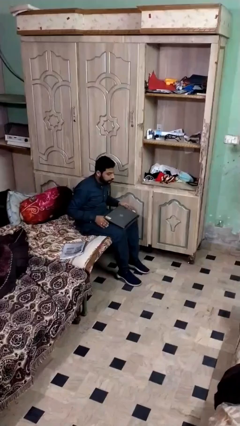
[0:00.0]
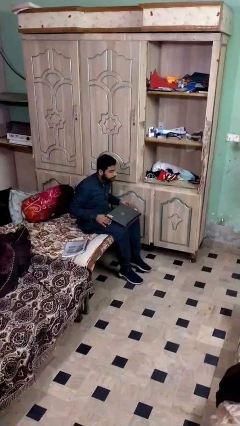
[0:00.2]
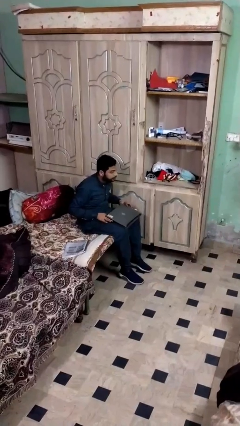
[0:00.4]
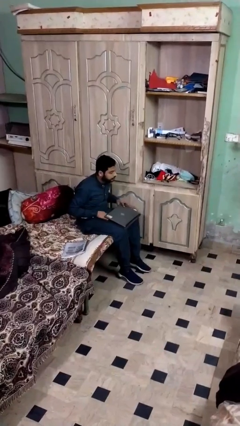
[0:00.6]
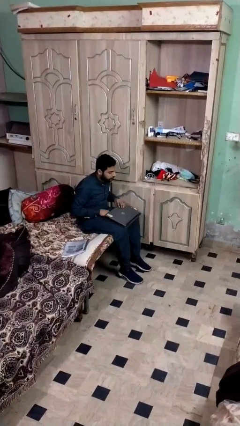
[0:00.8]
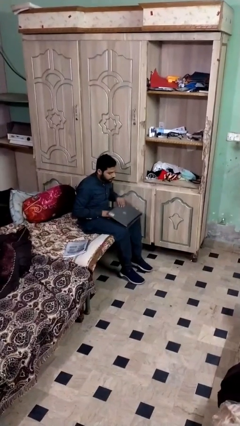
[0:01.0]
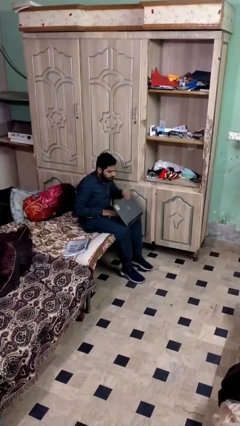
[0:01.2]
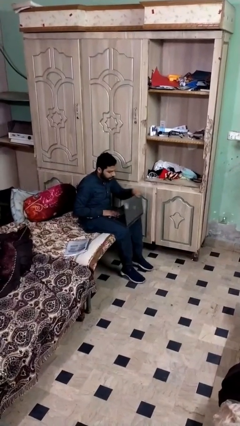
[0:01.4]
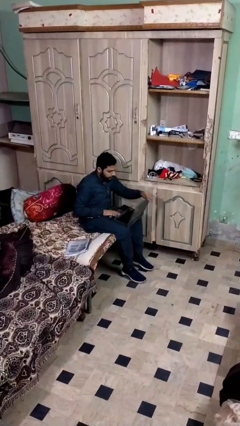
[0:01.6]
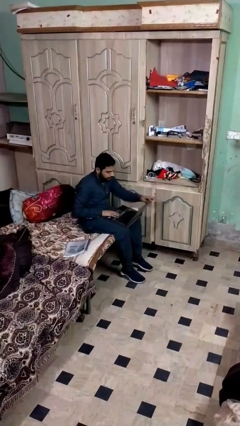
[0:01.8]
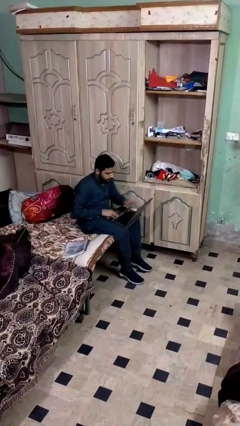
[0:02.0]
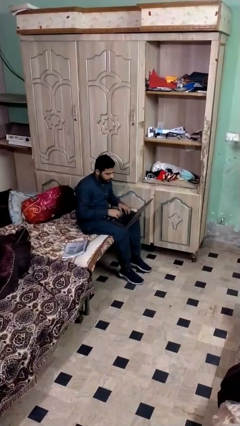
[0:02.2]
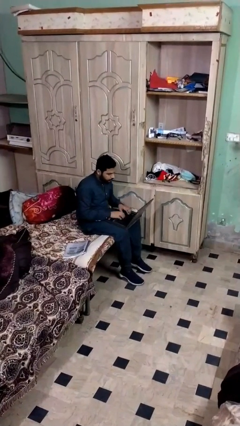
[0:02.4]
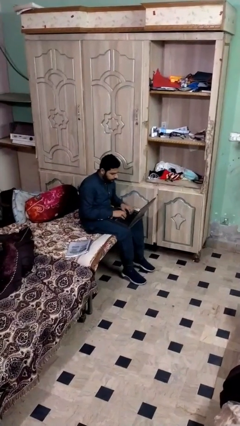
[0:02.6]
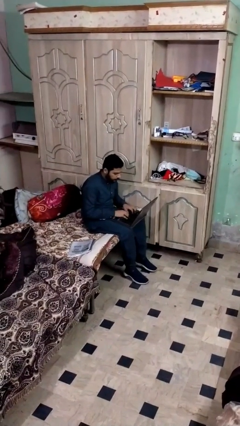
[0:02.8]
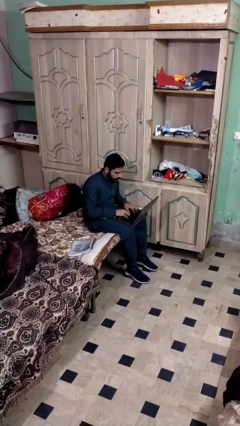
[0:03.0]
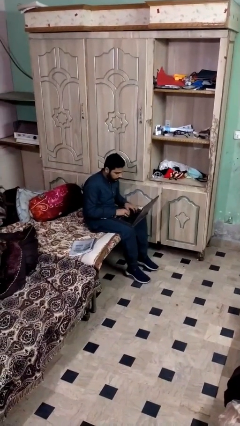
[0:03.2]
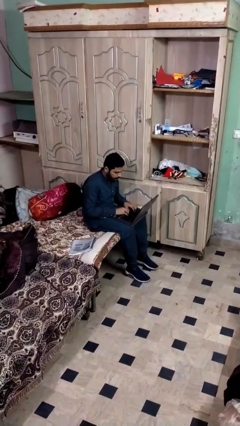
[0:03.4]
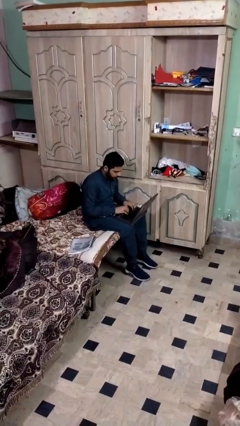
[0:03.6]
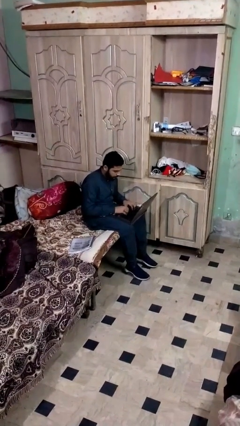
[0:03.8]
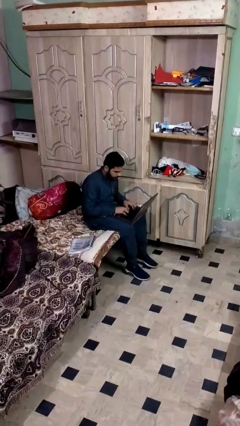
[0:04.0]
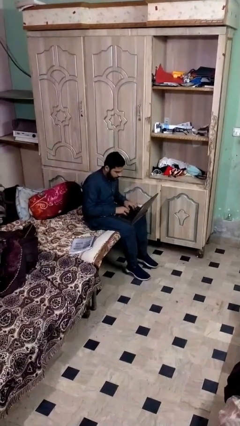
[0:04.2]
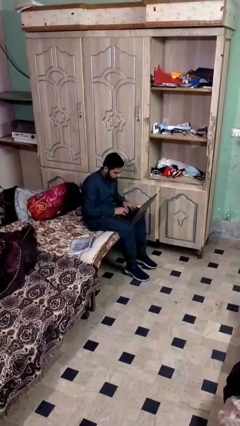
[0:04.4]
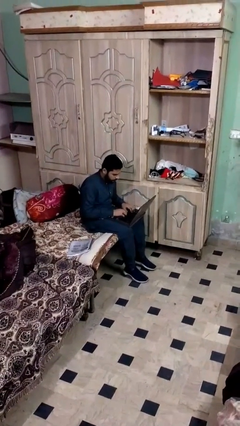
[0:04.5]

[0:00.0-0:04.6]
person interacts with laptop

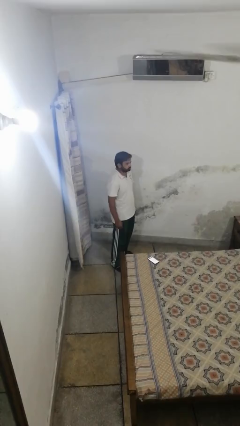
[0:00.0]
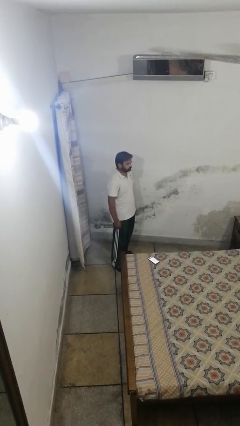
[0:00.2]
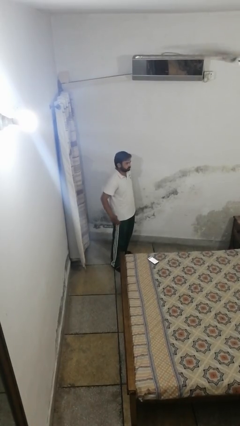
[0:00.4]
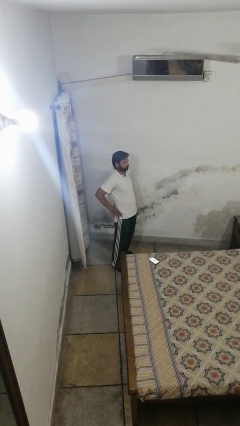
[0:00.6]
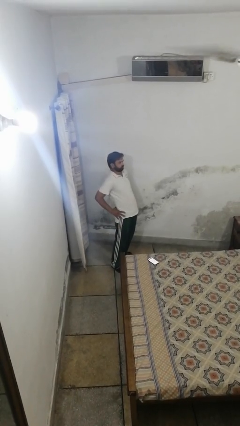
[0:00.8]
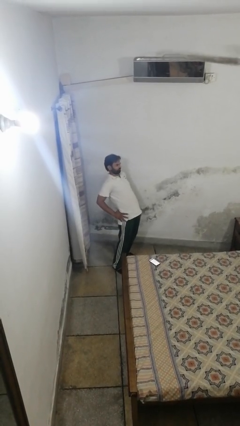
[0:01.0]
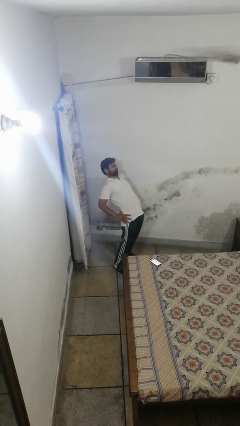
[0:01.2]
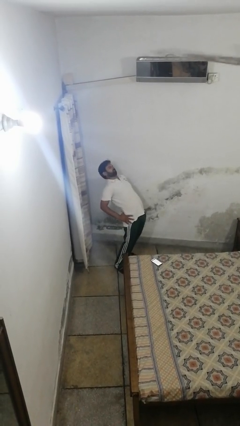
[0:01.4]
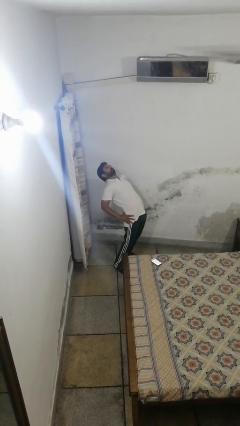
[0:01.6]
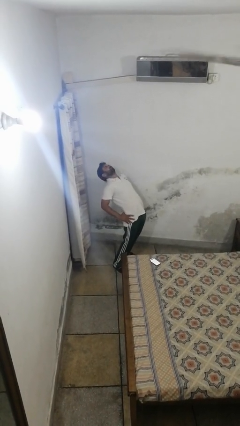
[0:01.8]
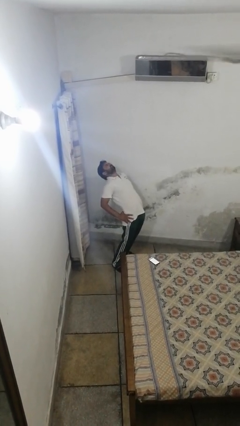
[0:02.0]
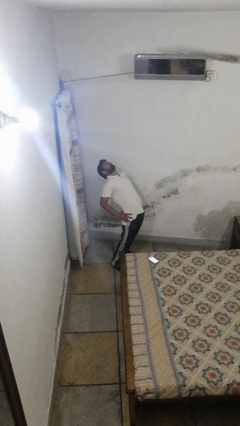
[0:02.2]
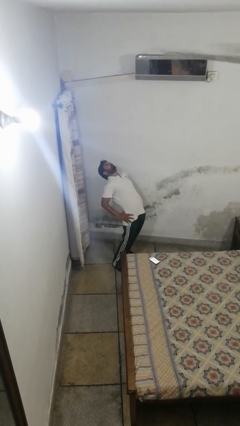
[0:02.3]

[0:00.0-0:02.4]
person stretches back

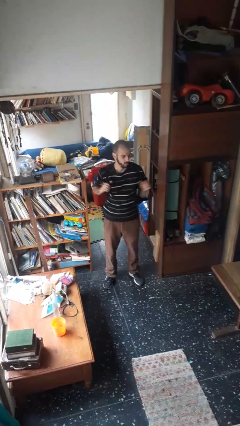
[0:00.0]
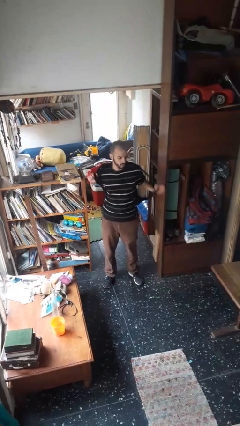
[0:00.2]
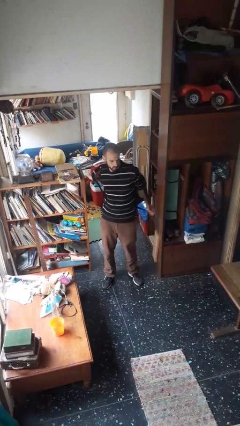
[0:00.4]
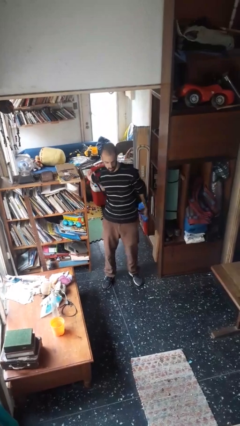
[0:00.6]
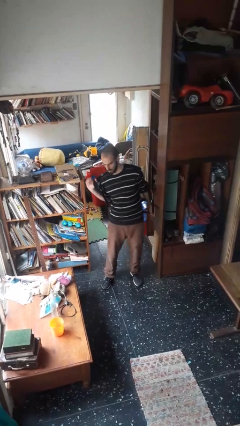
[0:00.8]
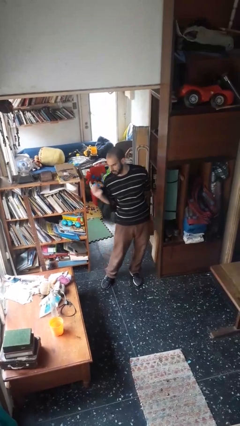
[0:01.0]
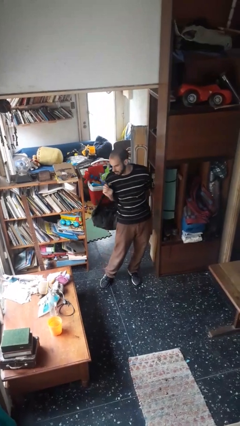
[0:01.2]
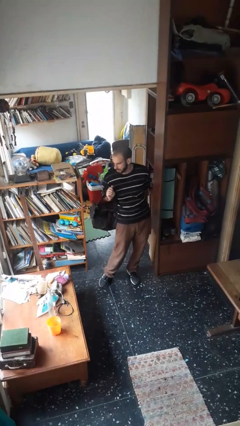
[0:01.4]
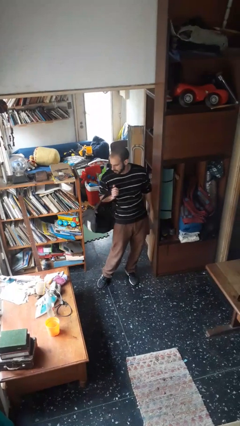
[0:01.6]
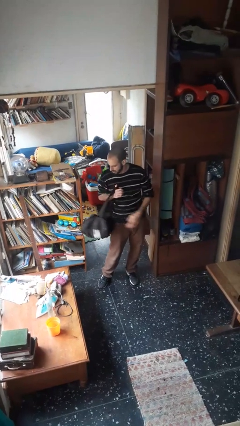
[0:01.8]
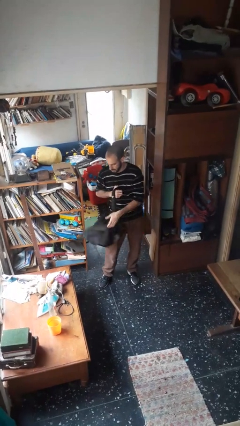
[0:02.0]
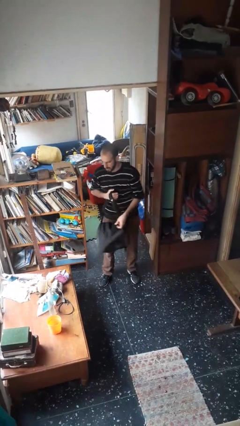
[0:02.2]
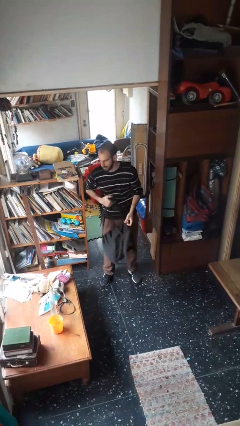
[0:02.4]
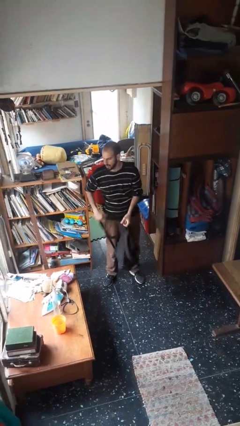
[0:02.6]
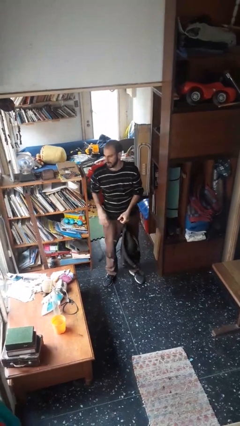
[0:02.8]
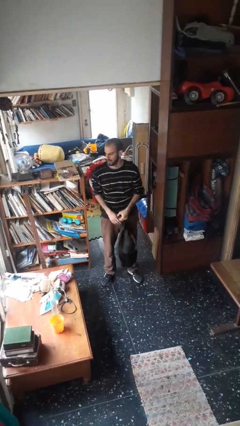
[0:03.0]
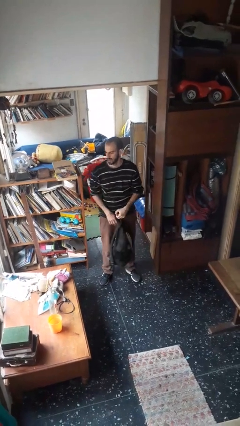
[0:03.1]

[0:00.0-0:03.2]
person takes off backpack

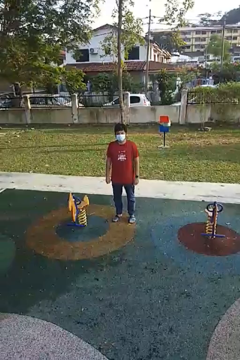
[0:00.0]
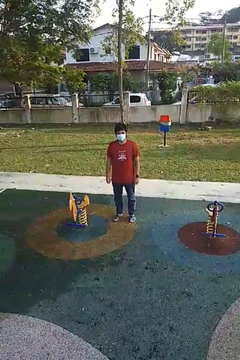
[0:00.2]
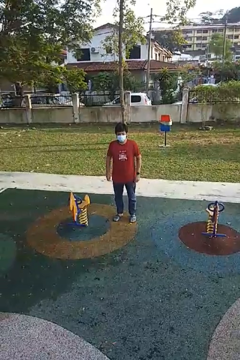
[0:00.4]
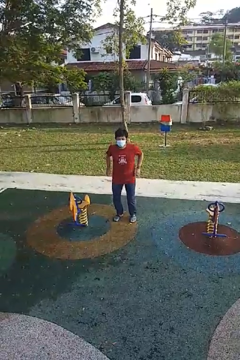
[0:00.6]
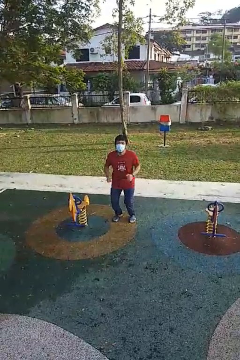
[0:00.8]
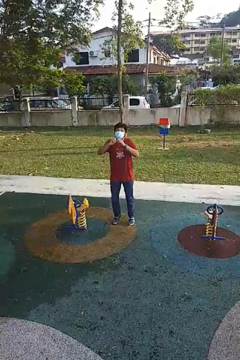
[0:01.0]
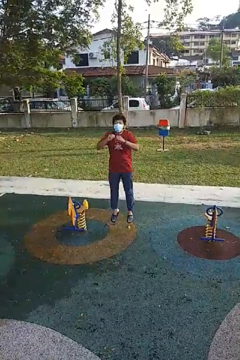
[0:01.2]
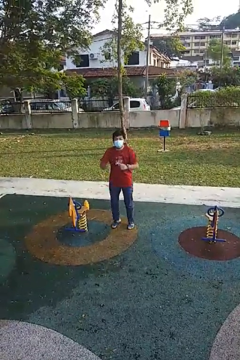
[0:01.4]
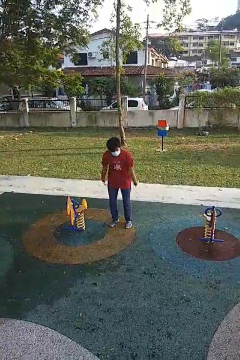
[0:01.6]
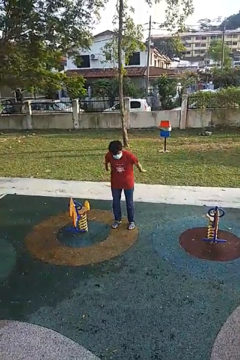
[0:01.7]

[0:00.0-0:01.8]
person jumps

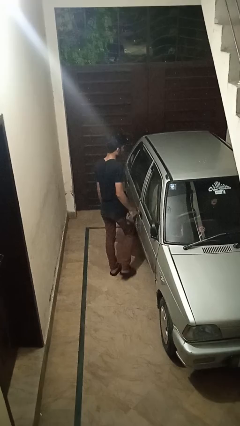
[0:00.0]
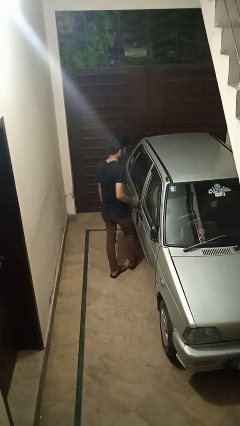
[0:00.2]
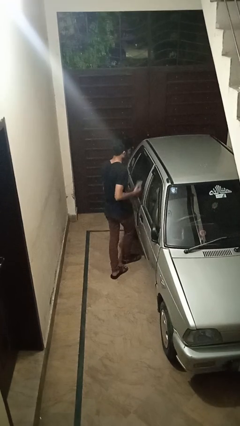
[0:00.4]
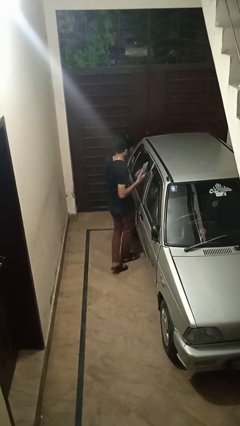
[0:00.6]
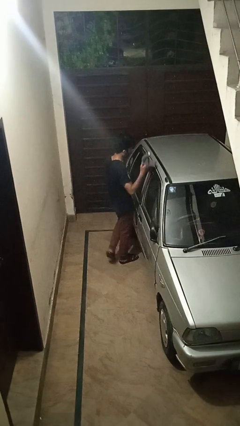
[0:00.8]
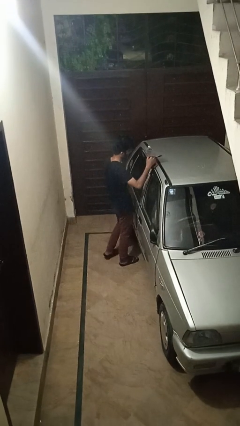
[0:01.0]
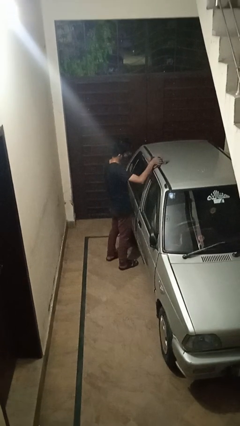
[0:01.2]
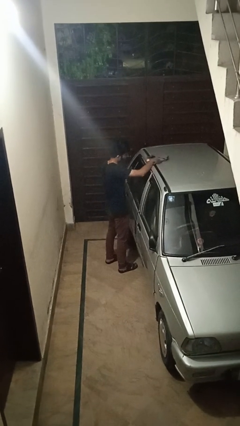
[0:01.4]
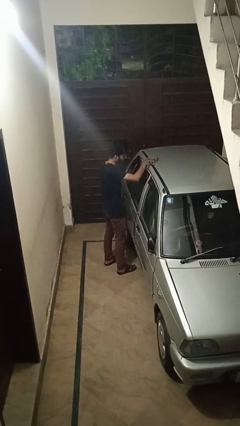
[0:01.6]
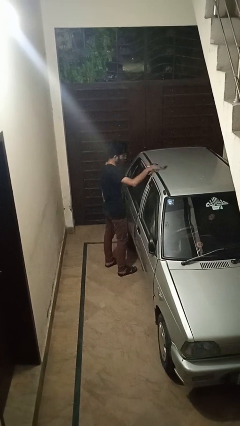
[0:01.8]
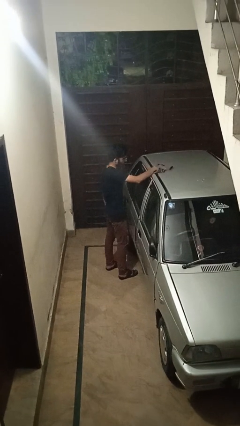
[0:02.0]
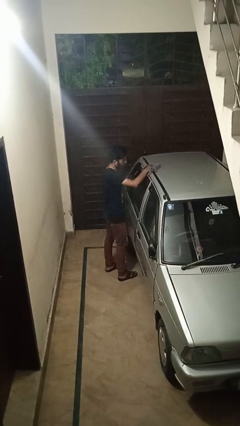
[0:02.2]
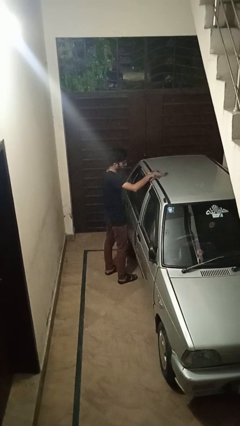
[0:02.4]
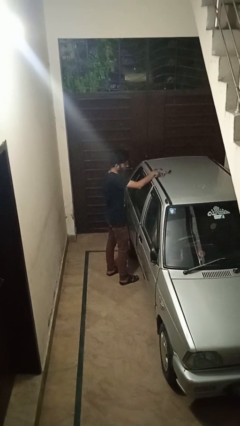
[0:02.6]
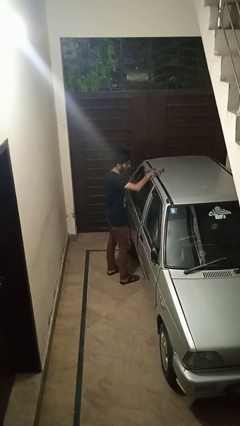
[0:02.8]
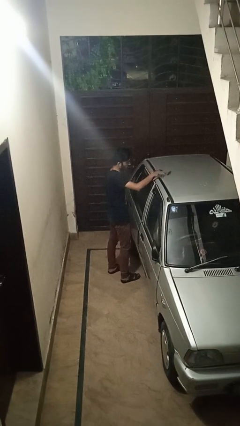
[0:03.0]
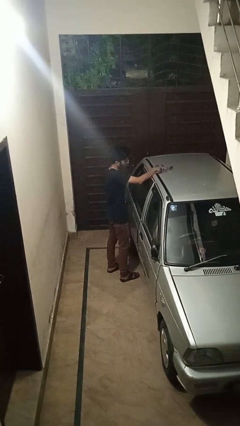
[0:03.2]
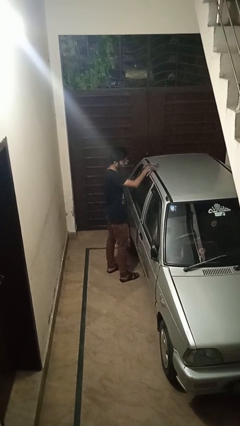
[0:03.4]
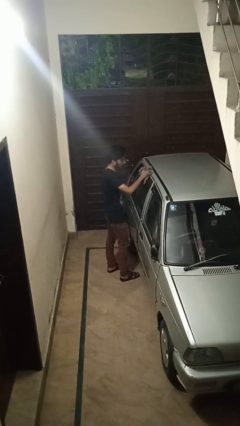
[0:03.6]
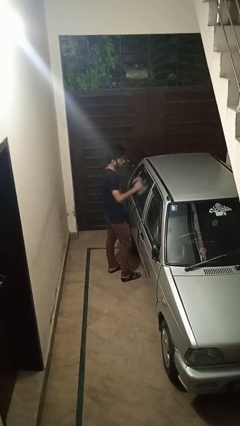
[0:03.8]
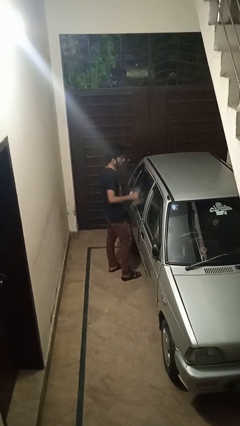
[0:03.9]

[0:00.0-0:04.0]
person polishes car with rag

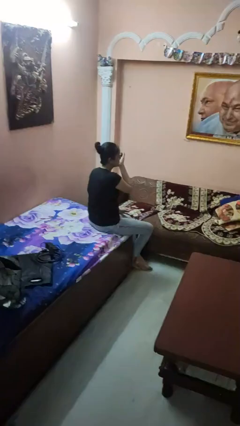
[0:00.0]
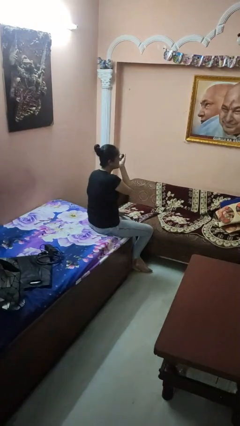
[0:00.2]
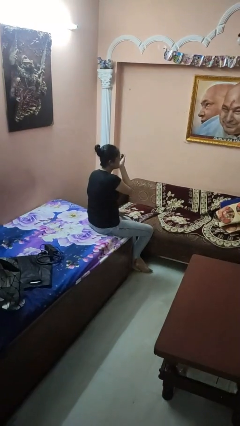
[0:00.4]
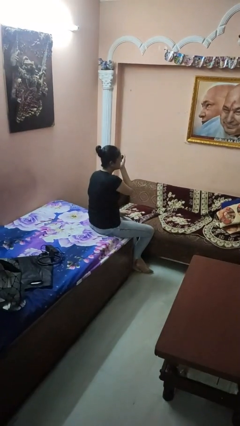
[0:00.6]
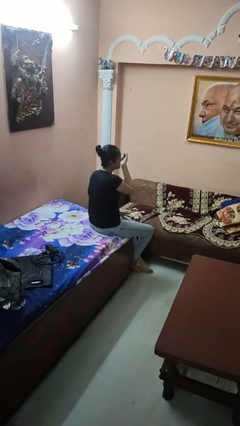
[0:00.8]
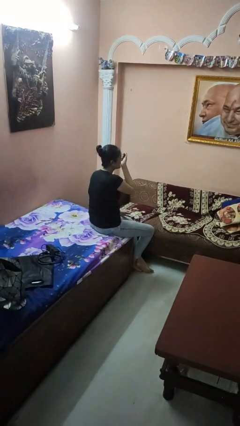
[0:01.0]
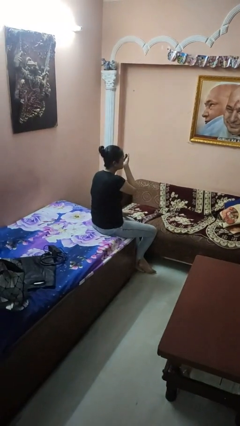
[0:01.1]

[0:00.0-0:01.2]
person applies eye makeup

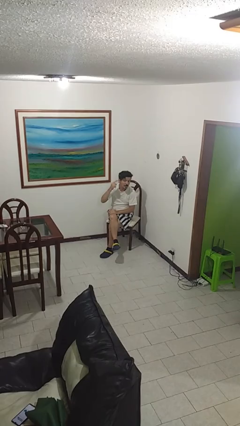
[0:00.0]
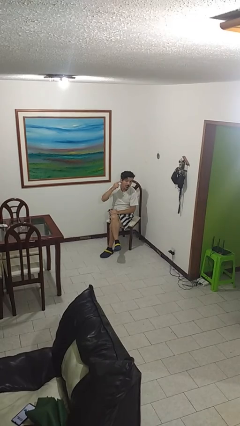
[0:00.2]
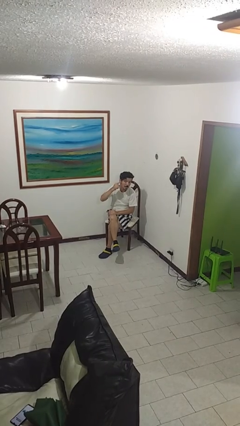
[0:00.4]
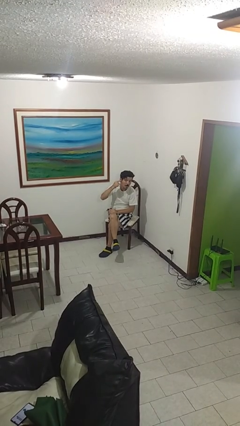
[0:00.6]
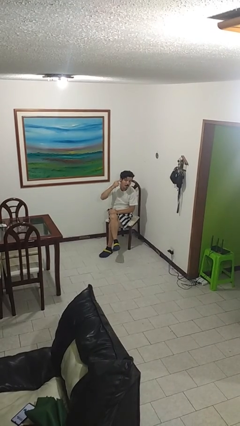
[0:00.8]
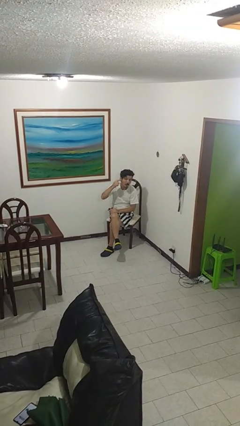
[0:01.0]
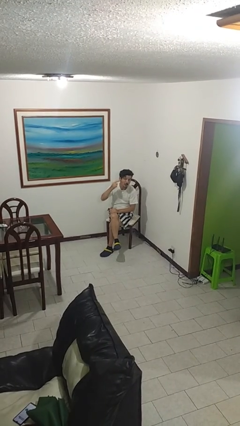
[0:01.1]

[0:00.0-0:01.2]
person gestures listen closely
